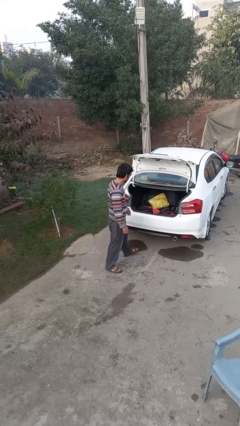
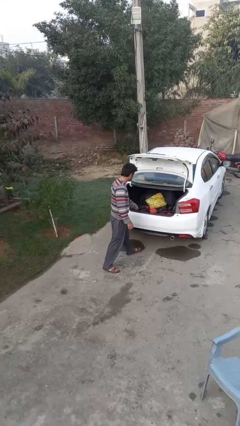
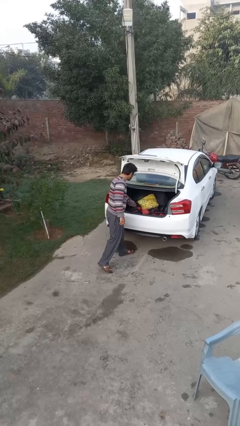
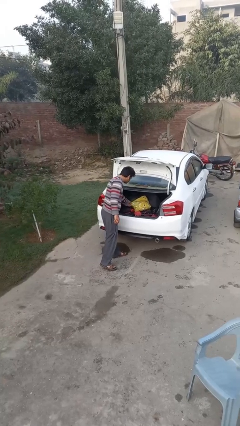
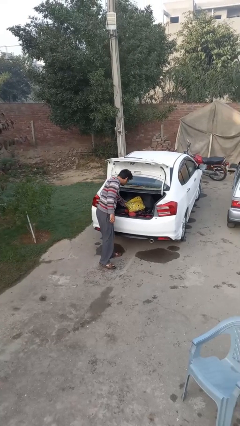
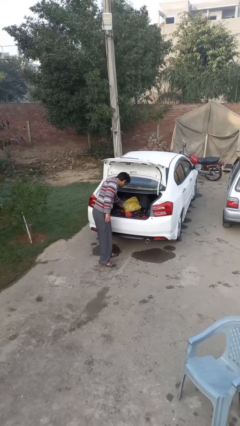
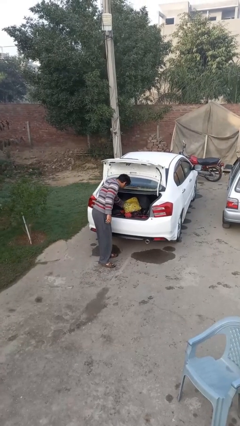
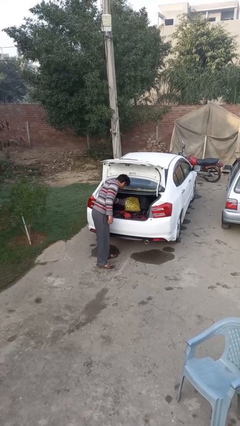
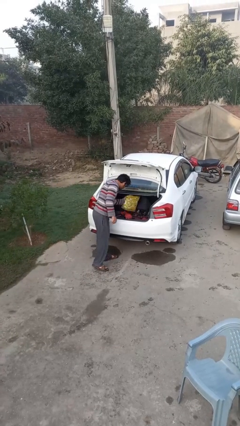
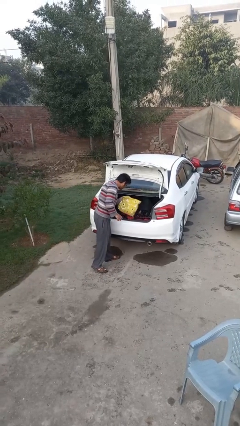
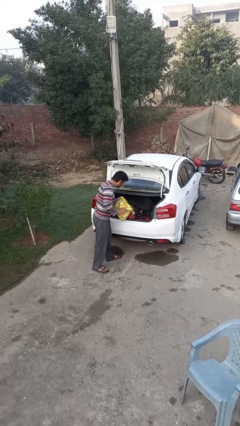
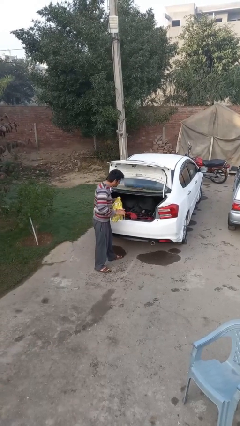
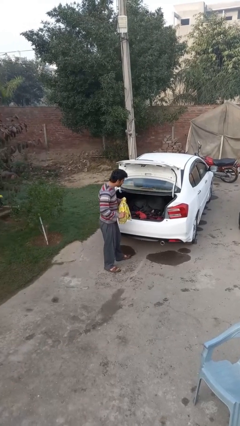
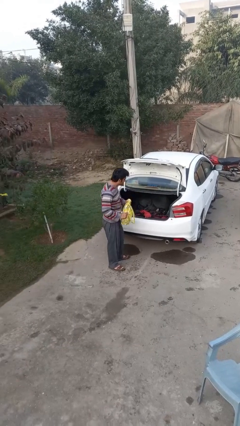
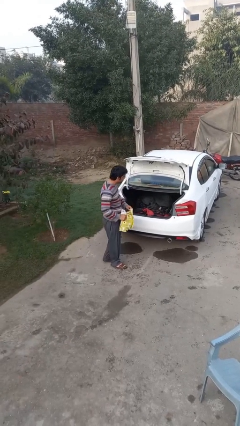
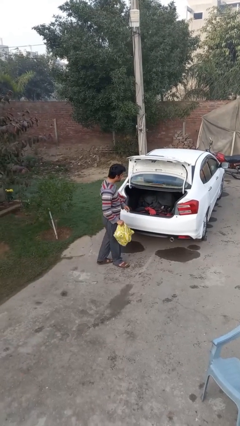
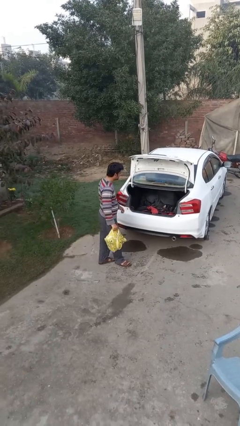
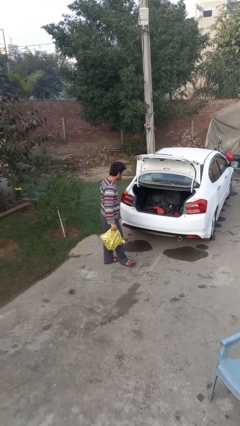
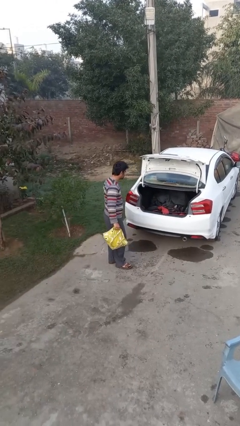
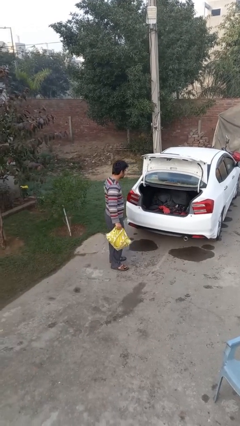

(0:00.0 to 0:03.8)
person unloads car

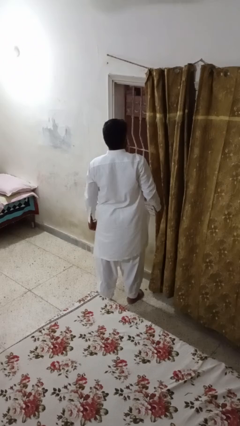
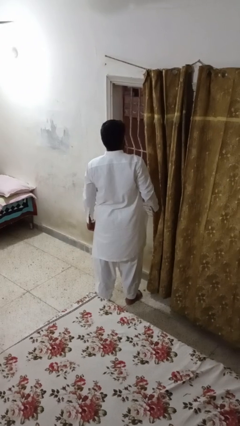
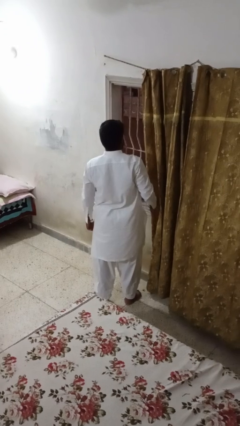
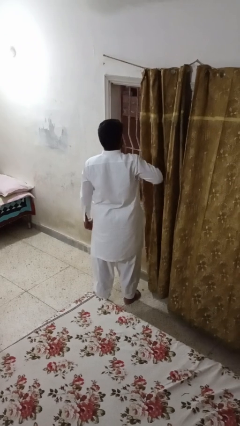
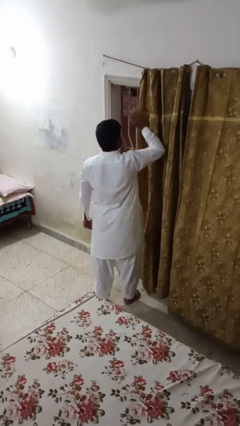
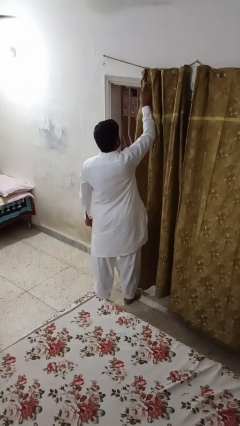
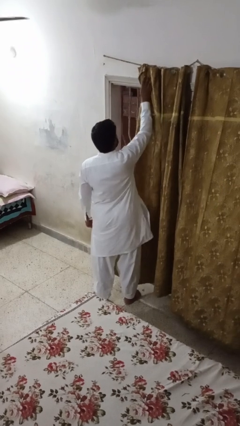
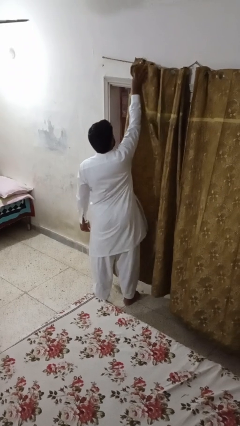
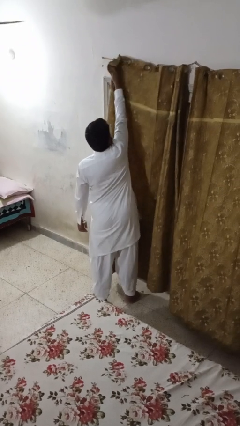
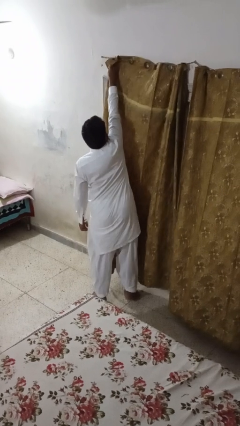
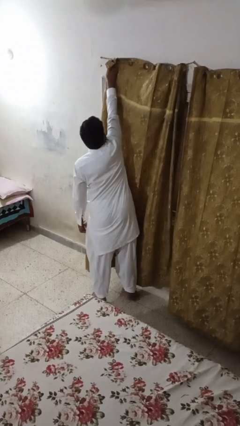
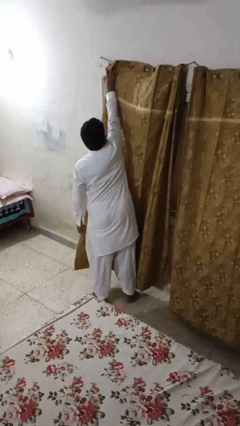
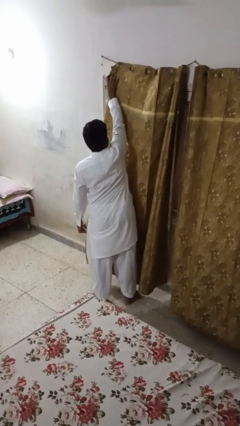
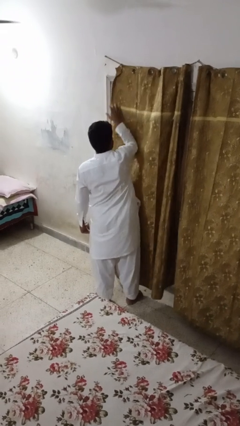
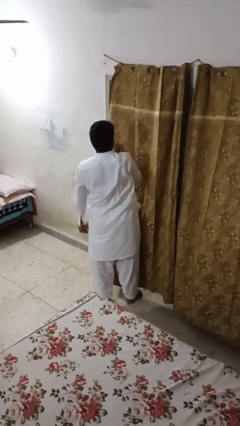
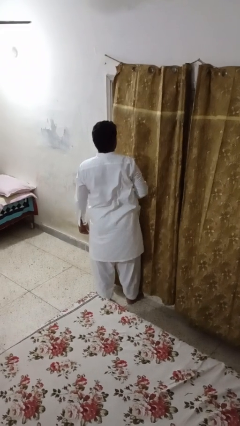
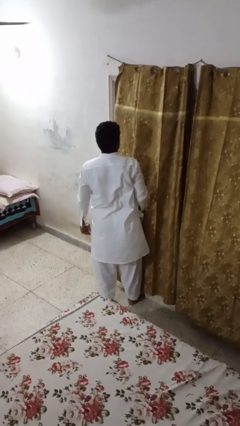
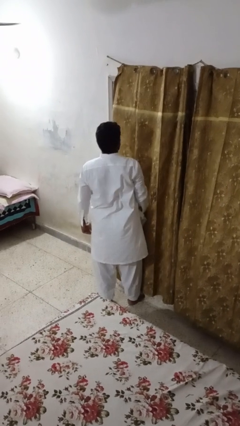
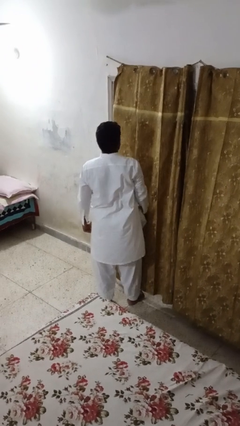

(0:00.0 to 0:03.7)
person closes curtains

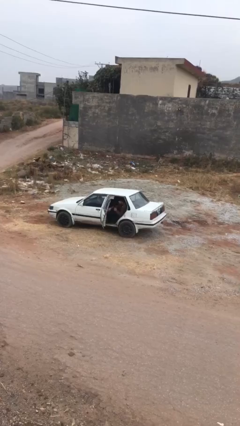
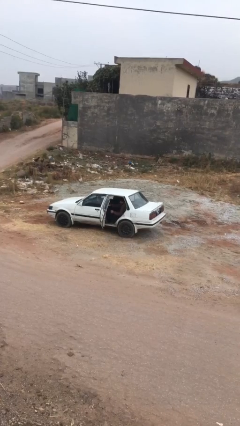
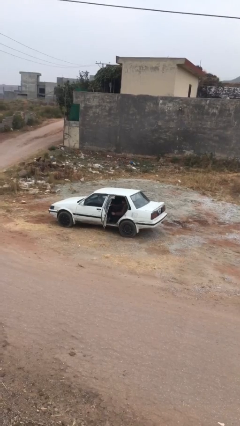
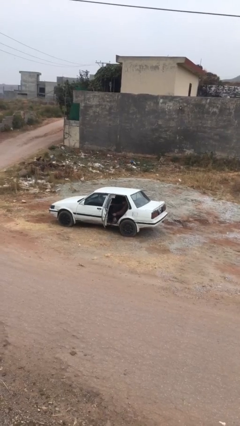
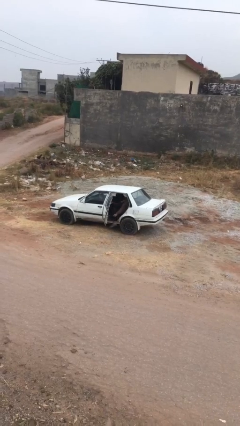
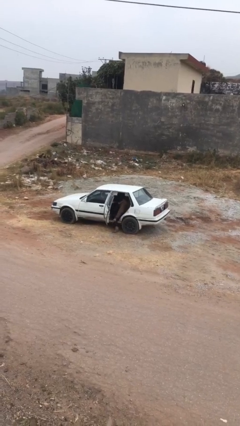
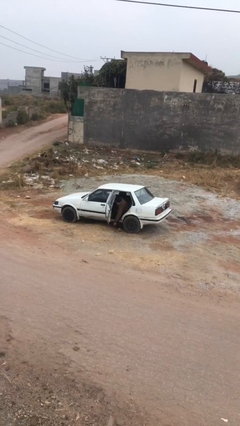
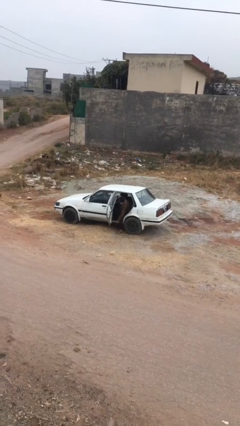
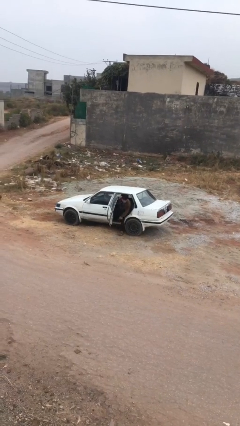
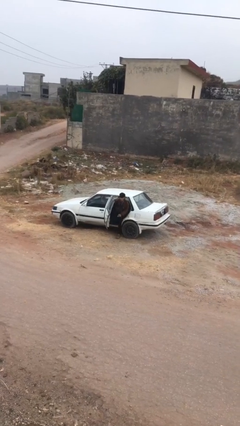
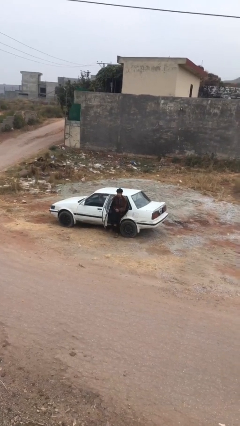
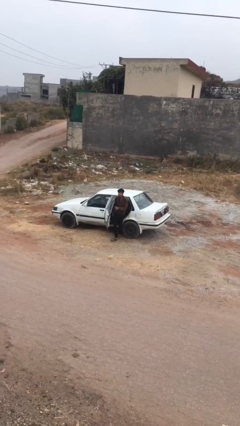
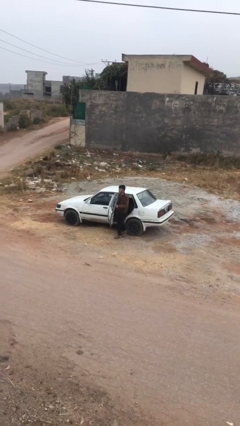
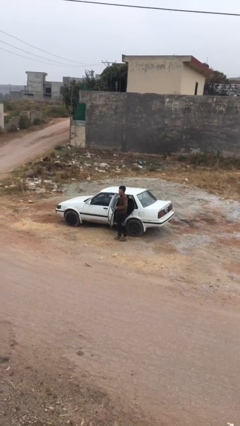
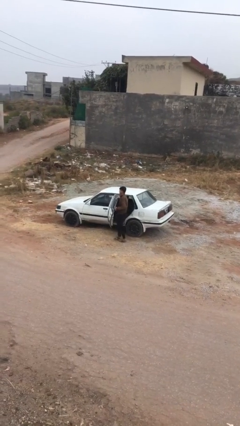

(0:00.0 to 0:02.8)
person exits car

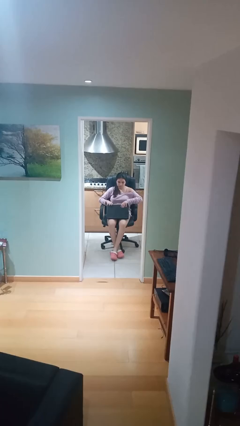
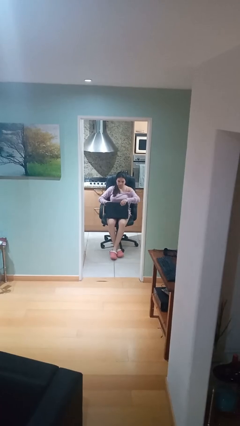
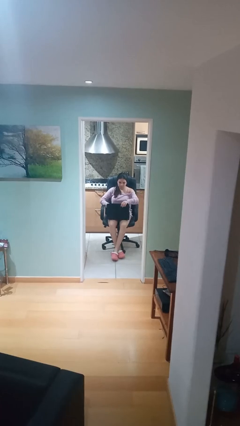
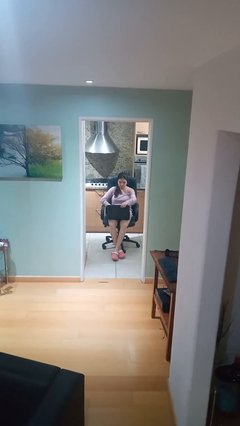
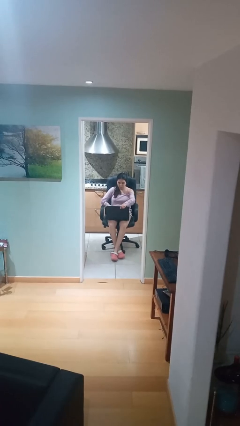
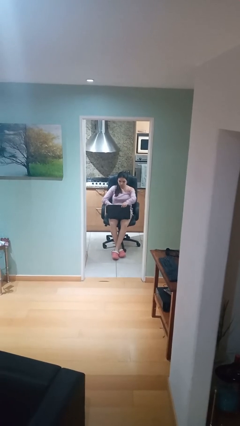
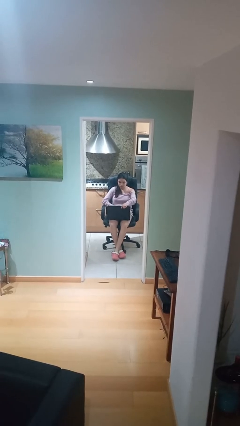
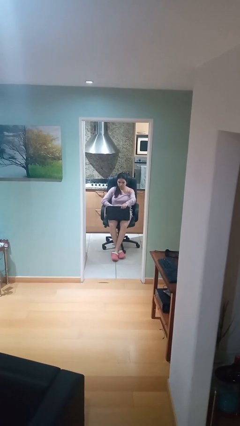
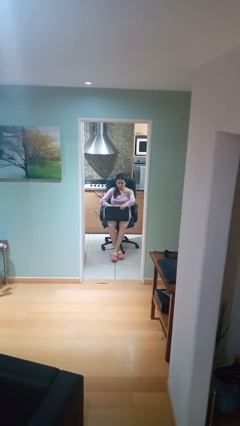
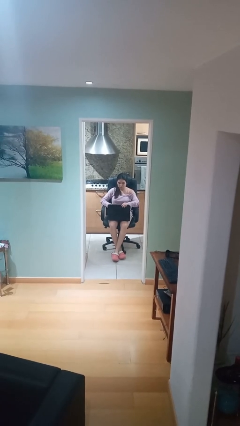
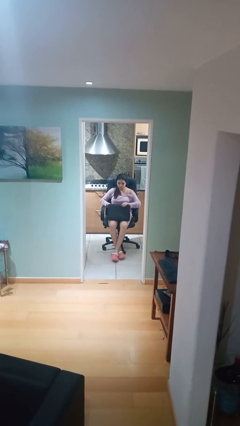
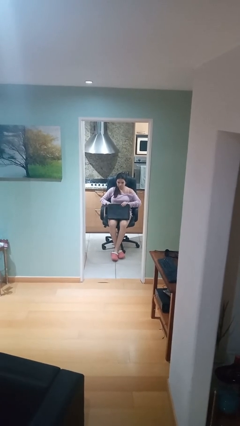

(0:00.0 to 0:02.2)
person interacts with laptop

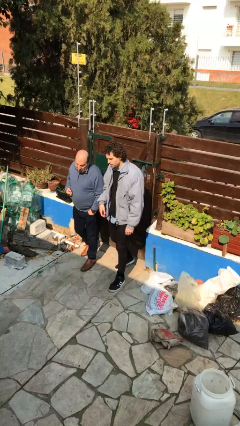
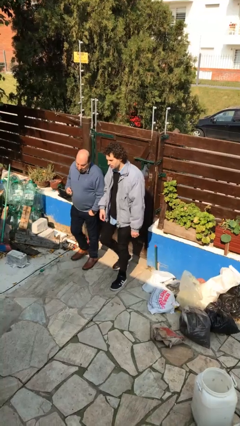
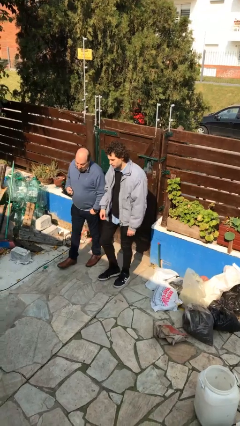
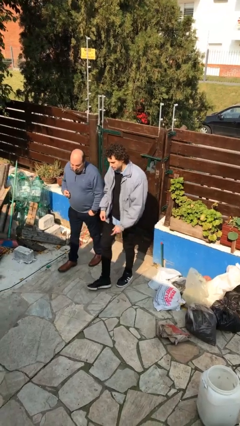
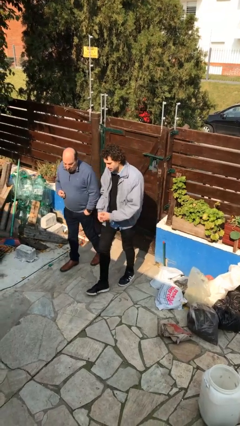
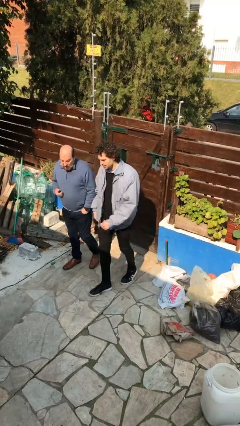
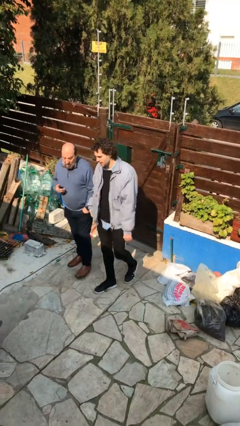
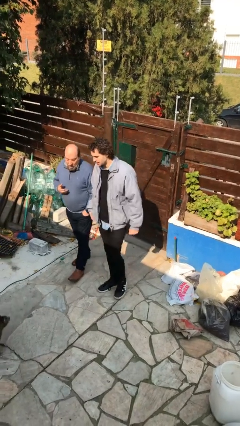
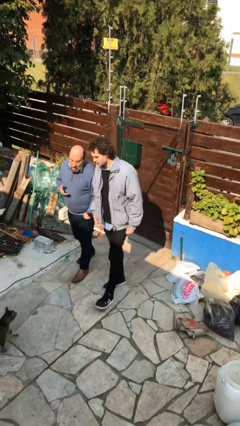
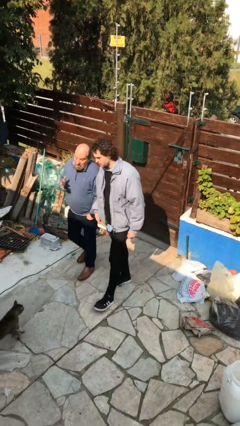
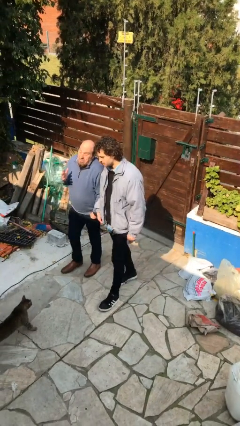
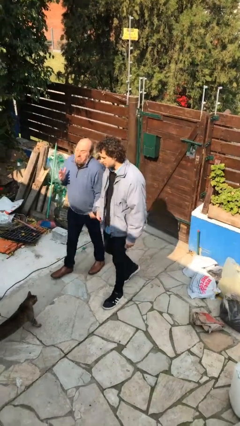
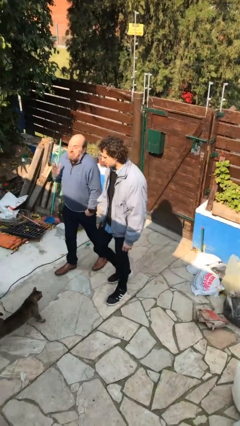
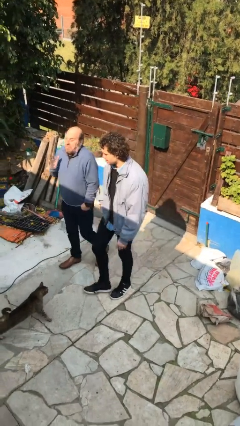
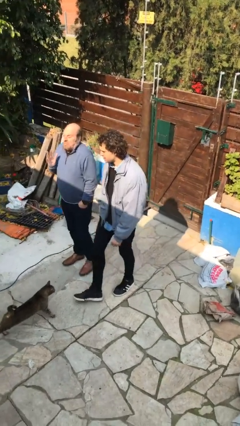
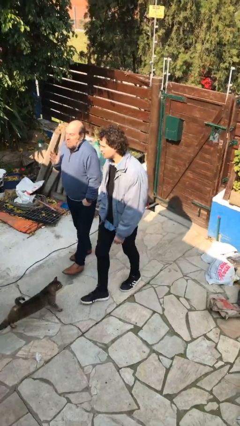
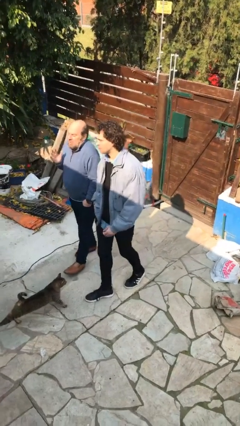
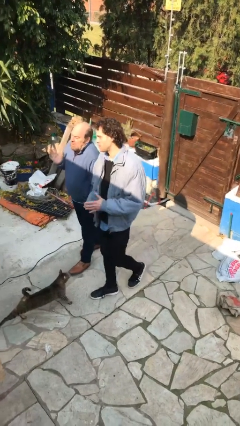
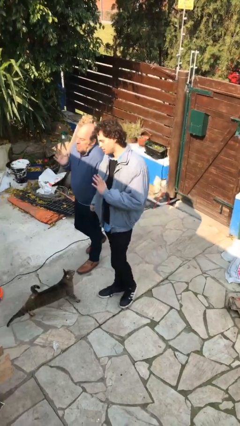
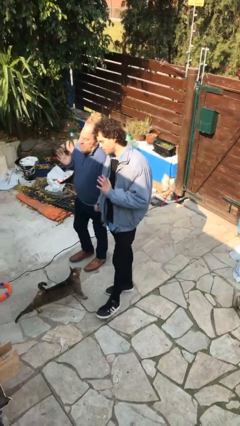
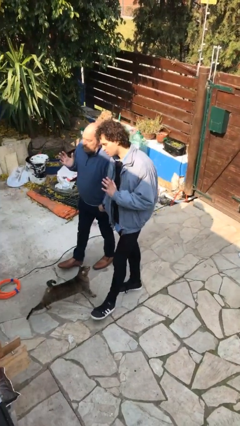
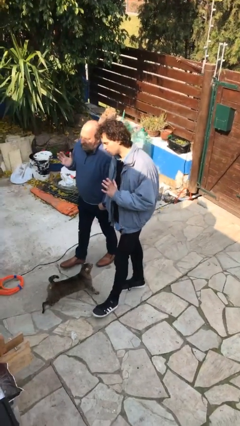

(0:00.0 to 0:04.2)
person talks to person

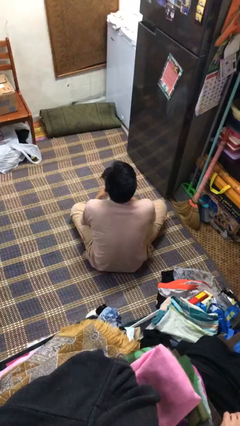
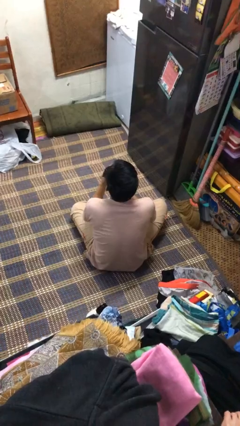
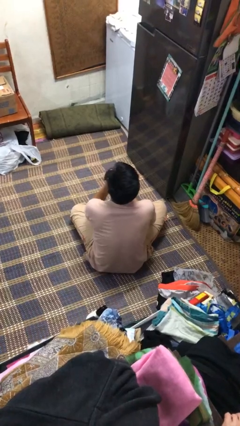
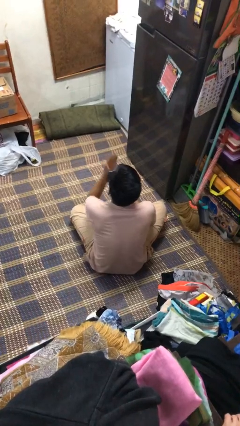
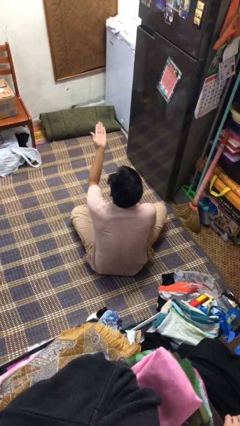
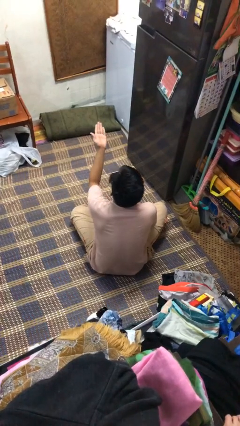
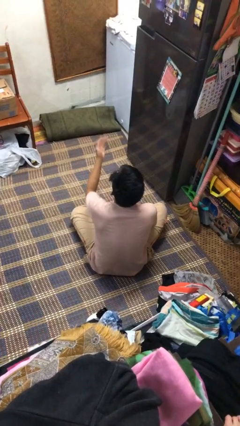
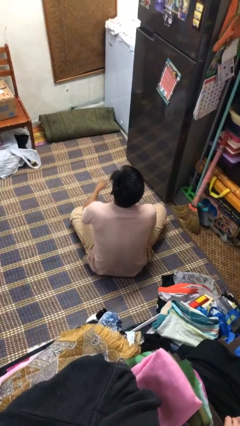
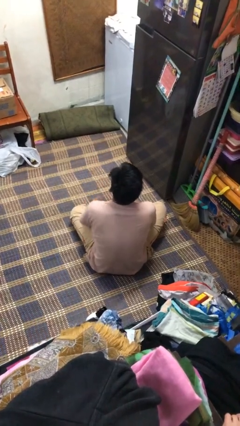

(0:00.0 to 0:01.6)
person gestures blow kiss
